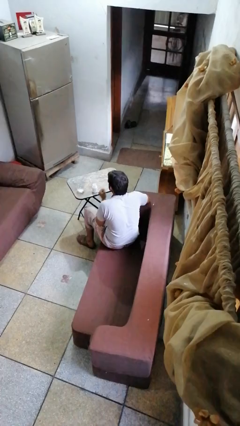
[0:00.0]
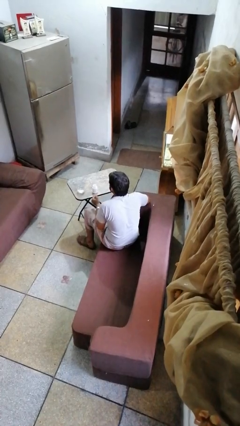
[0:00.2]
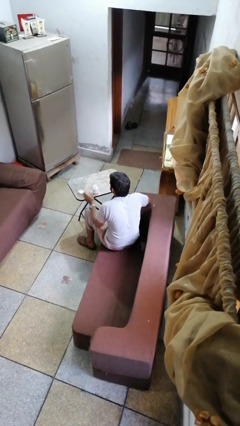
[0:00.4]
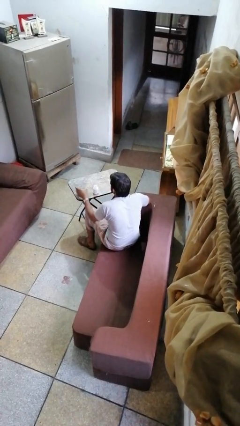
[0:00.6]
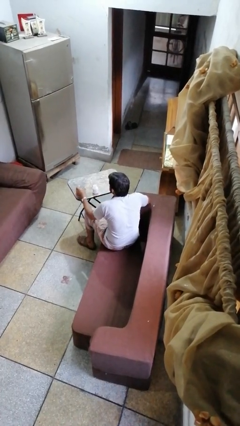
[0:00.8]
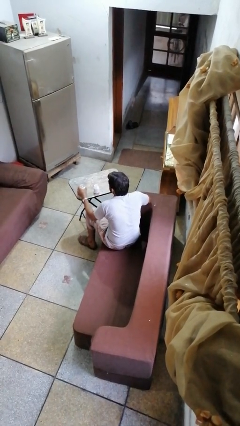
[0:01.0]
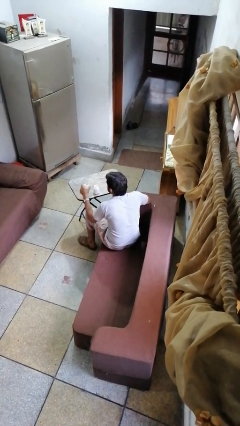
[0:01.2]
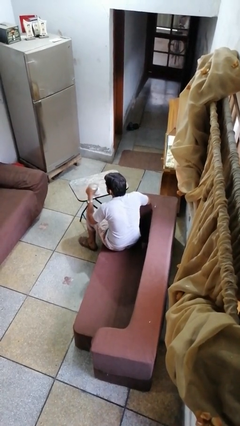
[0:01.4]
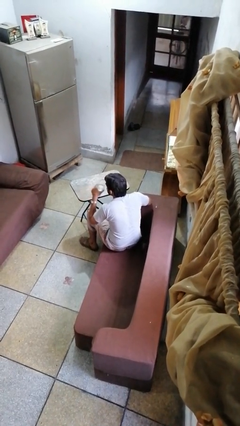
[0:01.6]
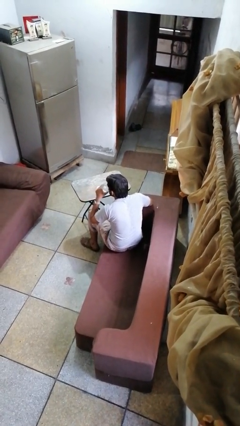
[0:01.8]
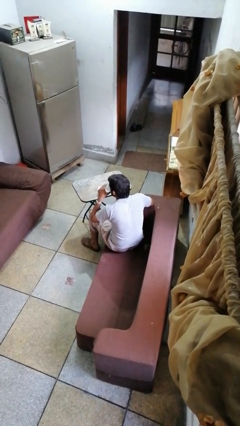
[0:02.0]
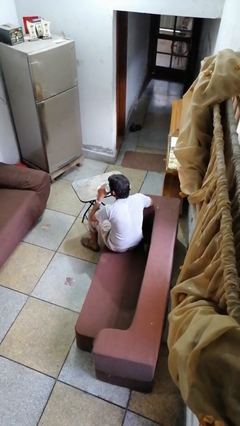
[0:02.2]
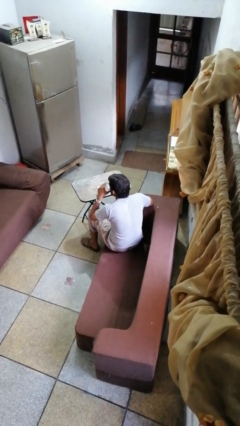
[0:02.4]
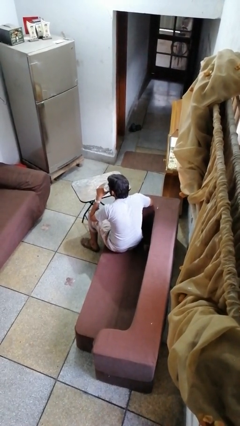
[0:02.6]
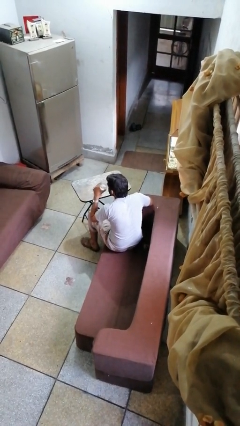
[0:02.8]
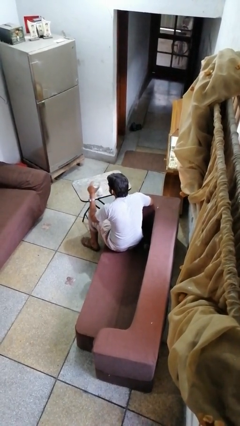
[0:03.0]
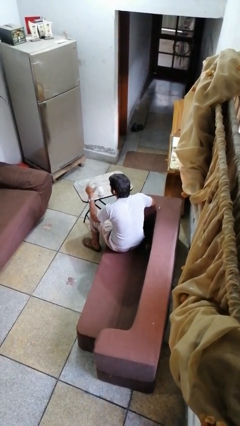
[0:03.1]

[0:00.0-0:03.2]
person drinks from cup

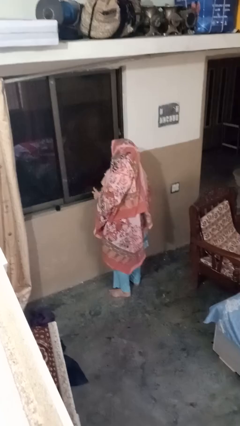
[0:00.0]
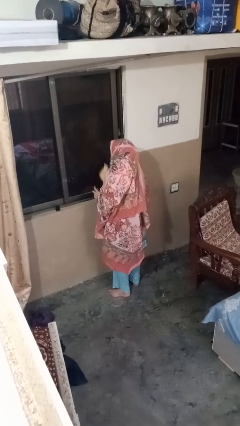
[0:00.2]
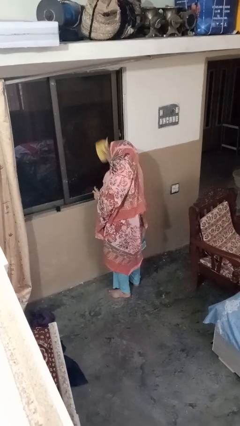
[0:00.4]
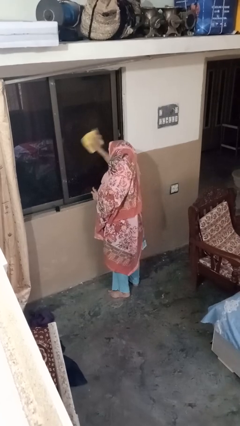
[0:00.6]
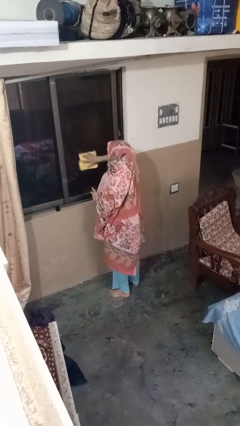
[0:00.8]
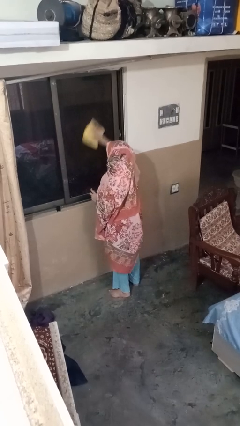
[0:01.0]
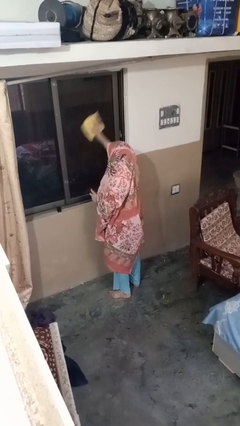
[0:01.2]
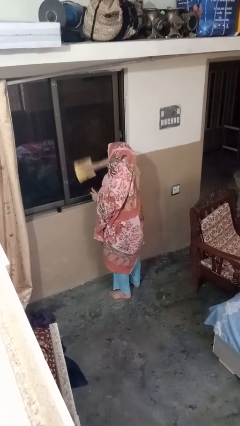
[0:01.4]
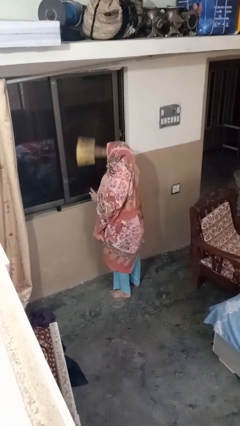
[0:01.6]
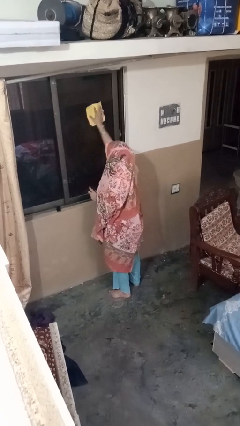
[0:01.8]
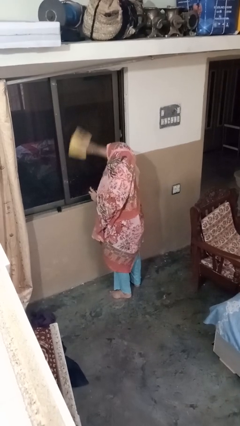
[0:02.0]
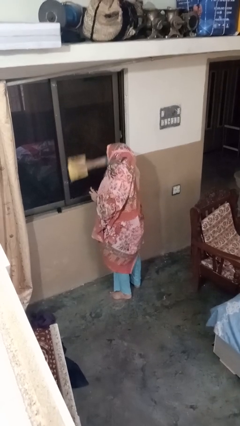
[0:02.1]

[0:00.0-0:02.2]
person washes window

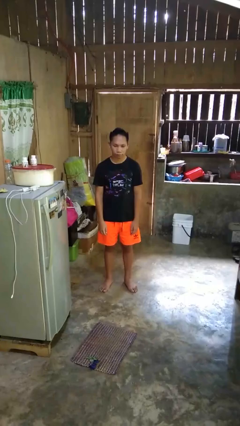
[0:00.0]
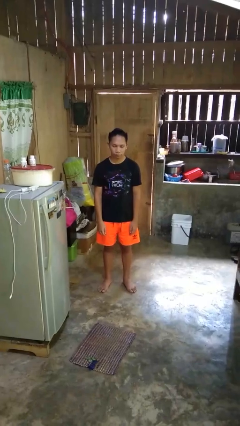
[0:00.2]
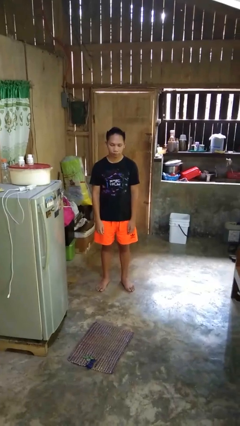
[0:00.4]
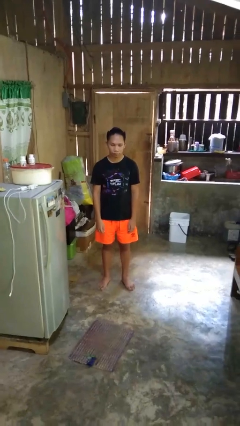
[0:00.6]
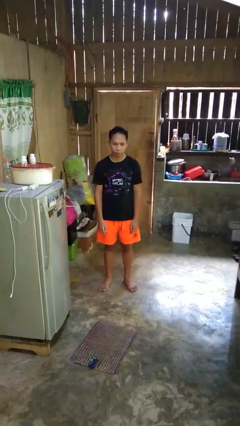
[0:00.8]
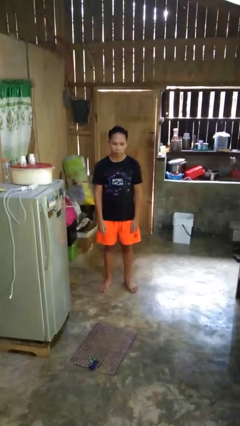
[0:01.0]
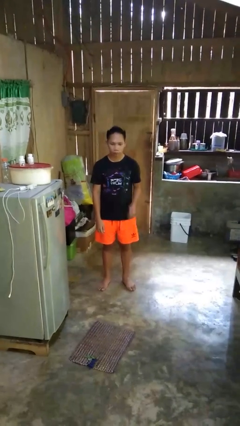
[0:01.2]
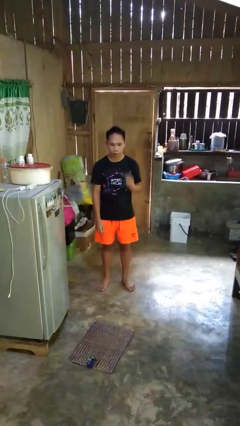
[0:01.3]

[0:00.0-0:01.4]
person rubs neck

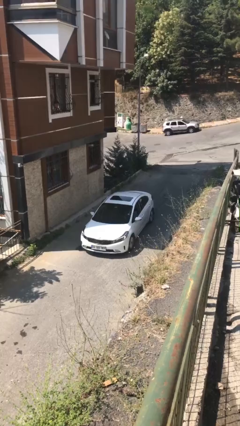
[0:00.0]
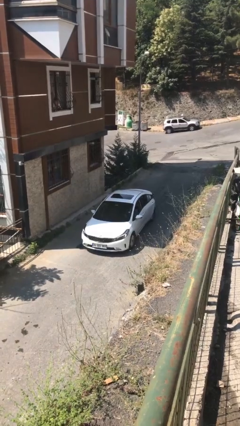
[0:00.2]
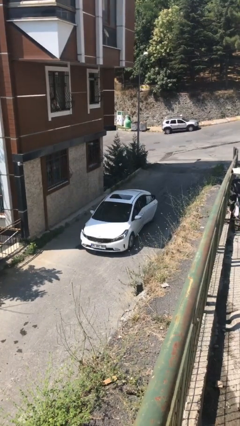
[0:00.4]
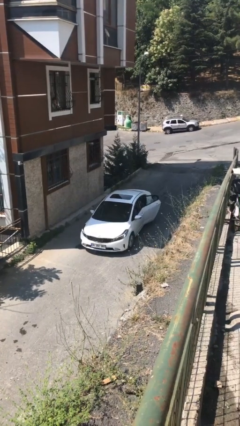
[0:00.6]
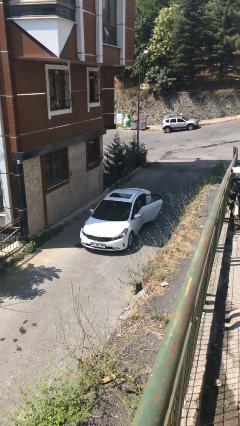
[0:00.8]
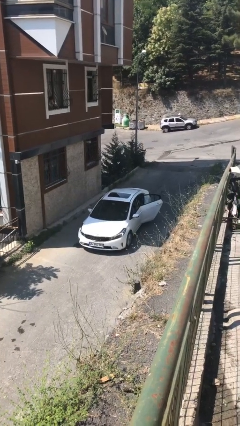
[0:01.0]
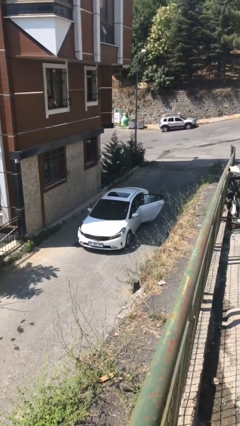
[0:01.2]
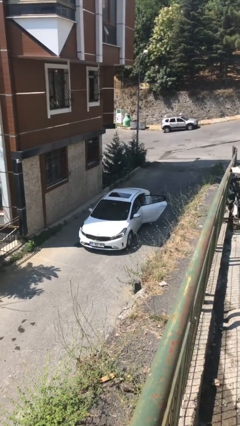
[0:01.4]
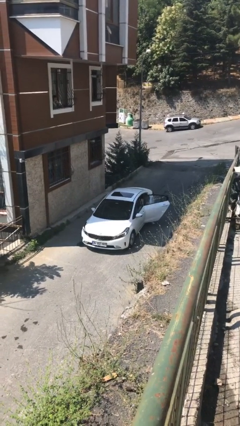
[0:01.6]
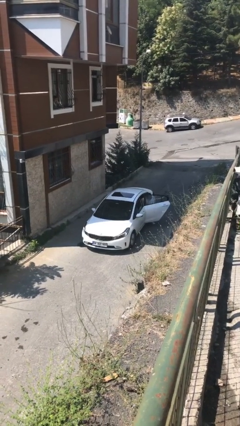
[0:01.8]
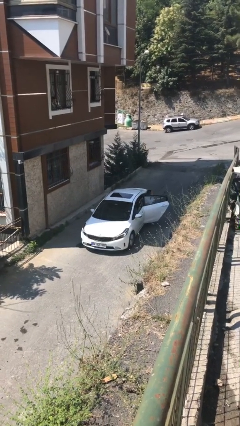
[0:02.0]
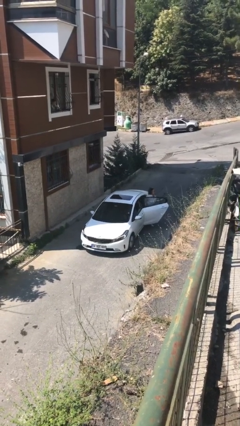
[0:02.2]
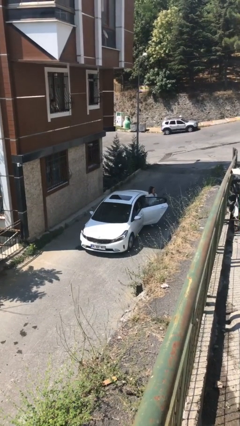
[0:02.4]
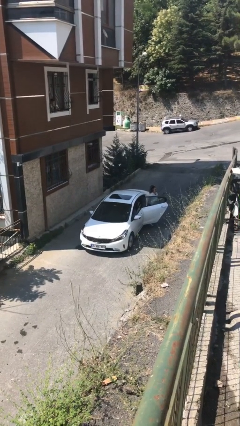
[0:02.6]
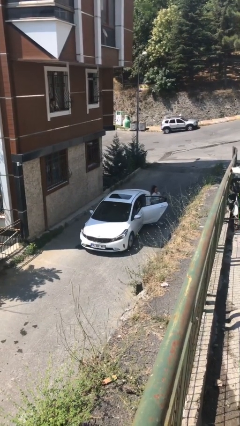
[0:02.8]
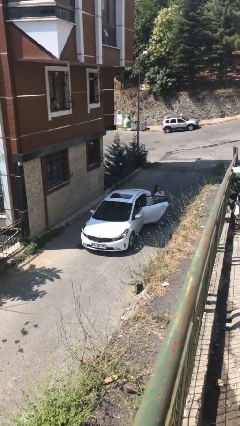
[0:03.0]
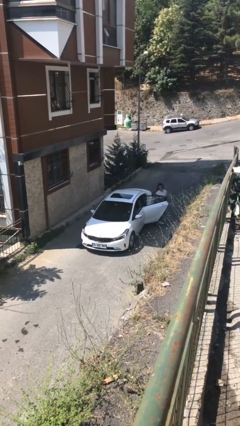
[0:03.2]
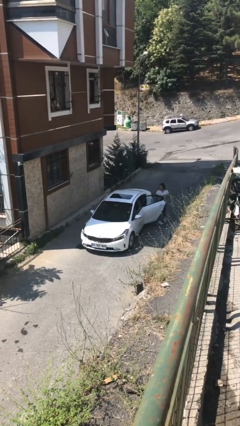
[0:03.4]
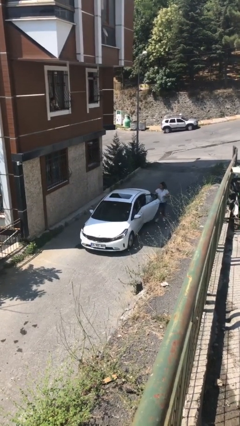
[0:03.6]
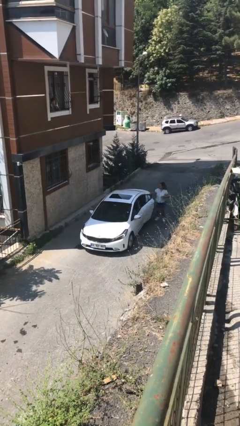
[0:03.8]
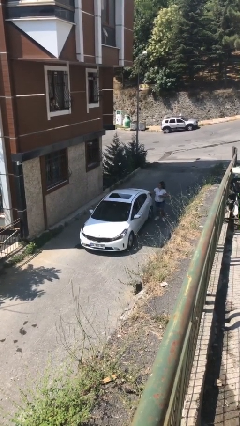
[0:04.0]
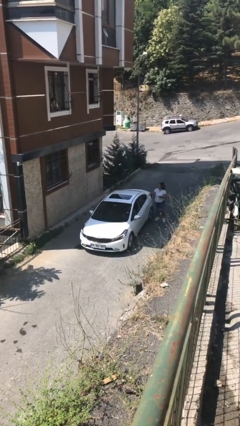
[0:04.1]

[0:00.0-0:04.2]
car drops off person

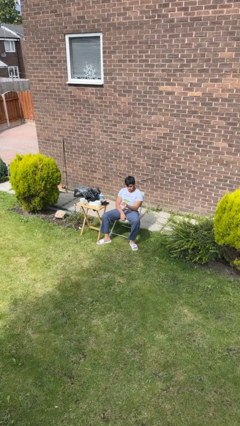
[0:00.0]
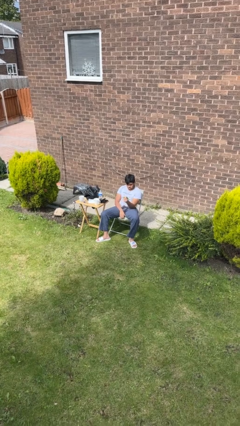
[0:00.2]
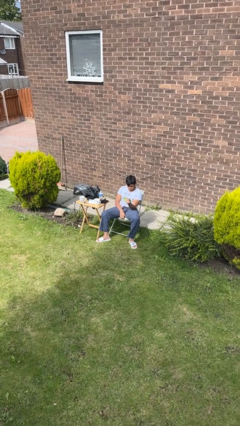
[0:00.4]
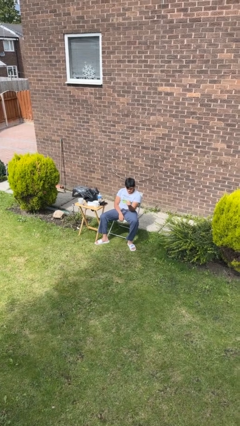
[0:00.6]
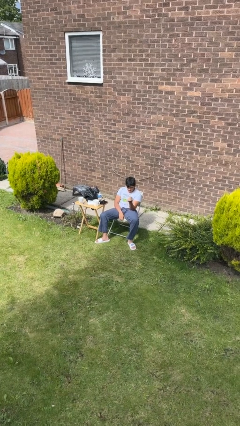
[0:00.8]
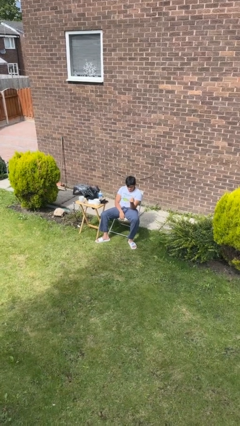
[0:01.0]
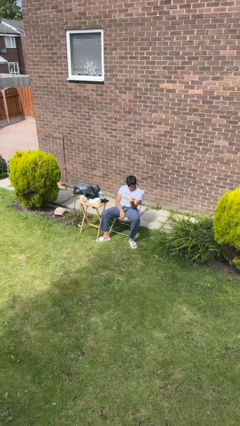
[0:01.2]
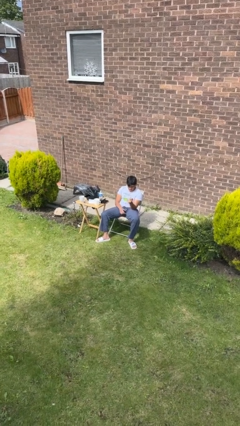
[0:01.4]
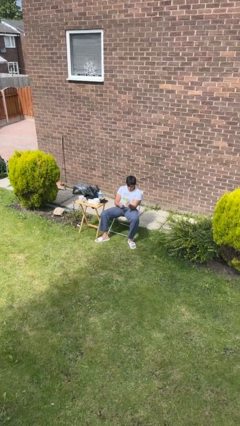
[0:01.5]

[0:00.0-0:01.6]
person snaps fingers

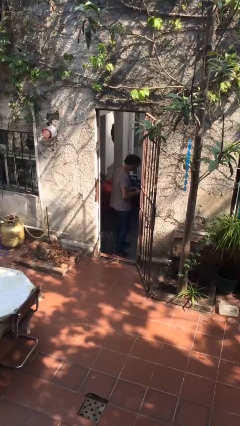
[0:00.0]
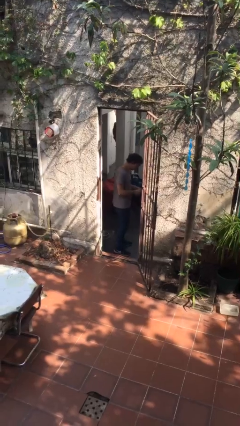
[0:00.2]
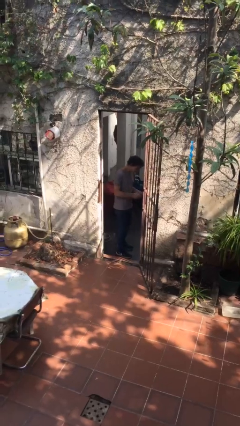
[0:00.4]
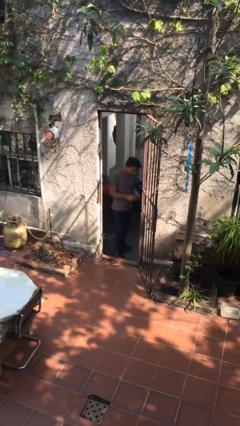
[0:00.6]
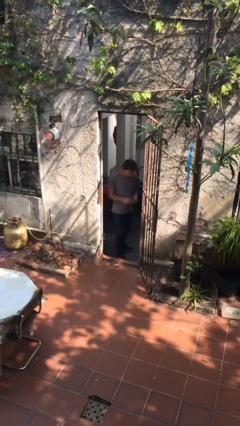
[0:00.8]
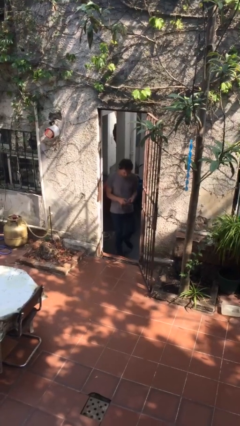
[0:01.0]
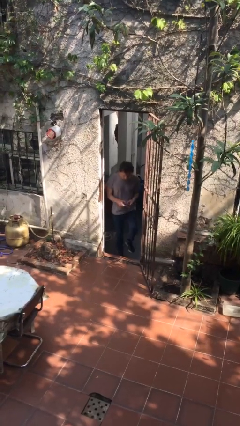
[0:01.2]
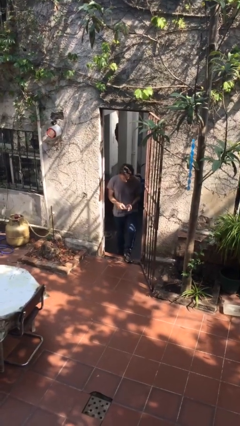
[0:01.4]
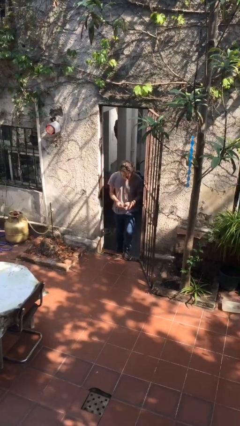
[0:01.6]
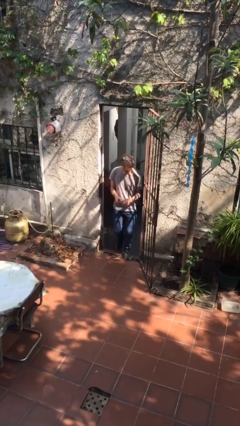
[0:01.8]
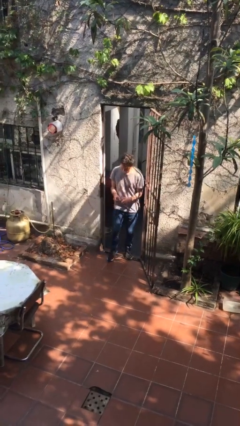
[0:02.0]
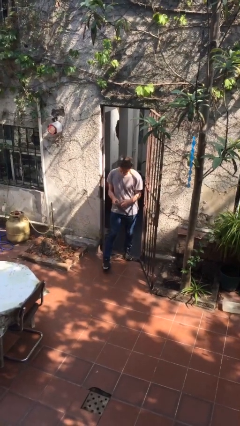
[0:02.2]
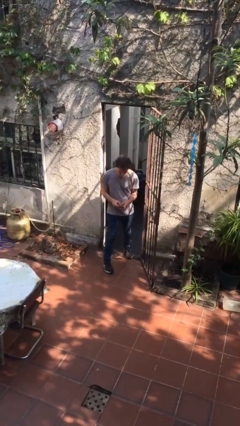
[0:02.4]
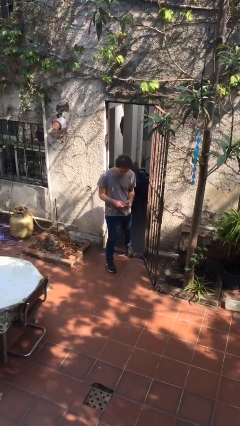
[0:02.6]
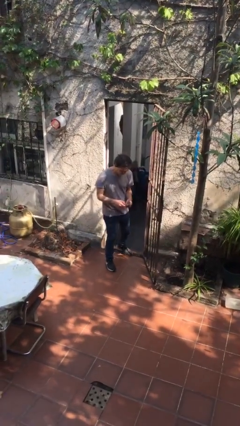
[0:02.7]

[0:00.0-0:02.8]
person enters scene through structure

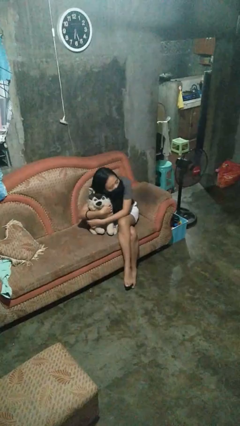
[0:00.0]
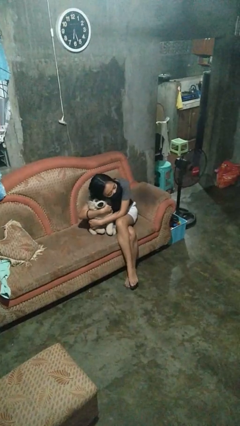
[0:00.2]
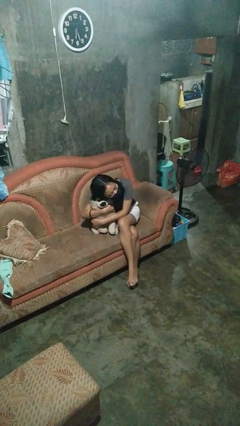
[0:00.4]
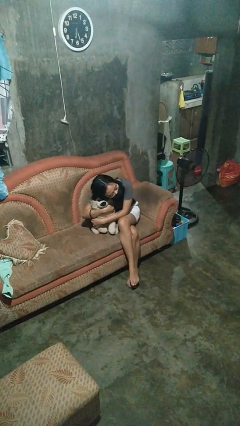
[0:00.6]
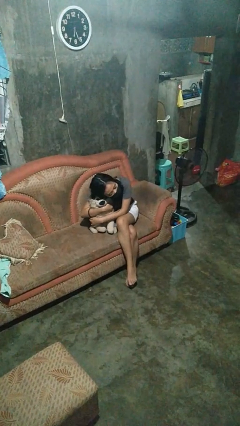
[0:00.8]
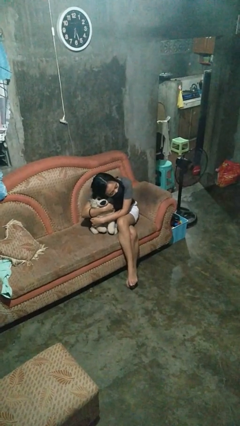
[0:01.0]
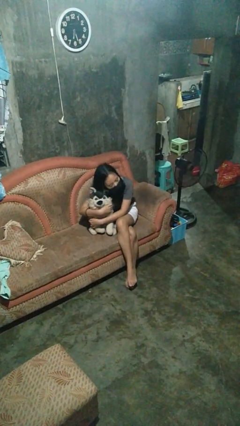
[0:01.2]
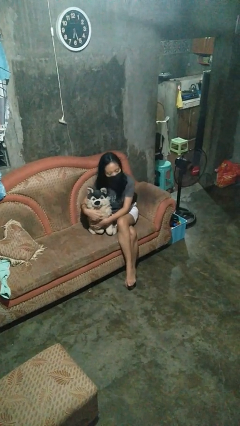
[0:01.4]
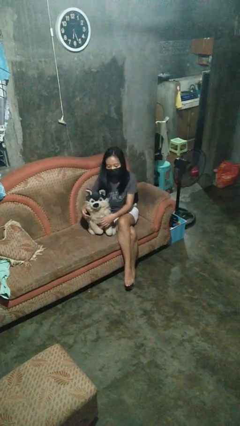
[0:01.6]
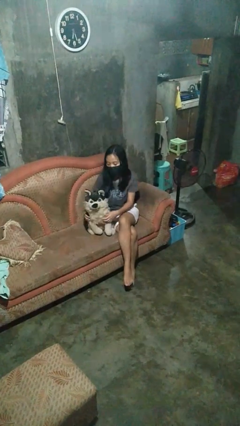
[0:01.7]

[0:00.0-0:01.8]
person hugs stuffed animal
